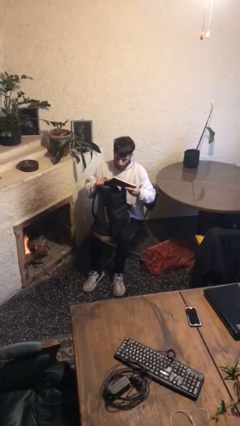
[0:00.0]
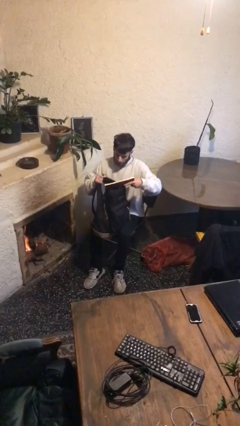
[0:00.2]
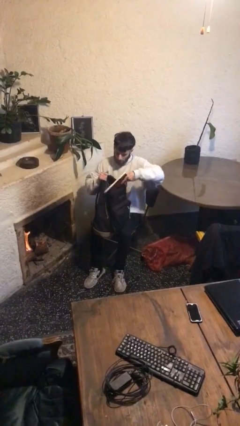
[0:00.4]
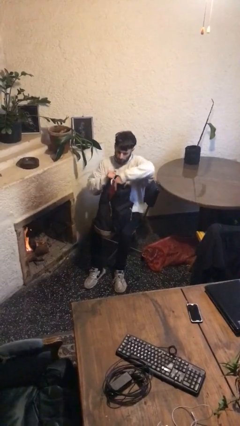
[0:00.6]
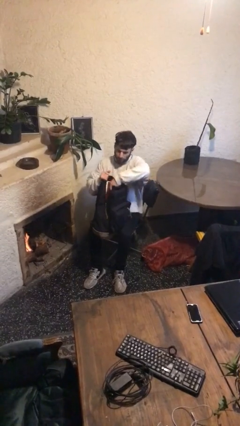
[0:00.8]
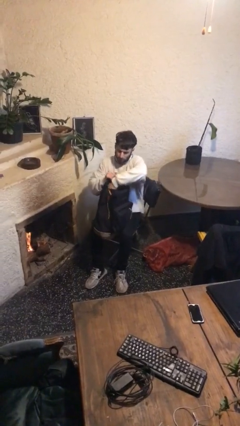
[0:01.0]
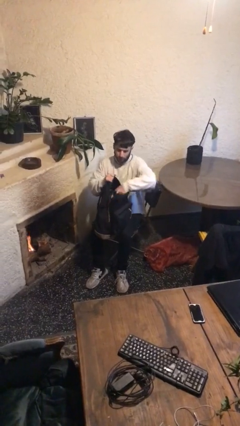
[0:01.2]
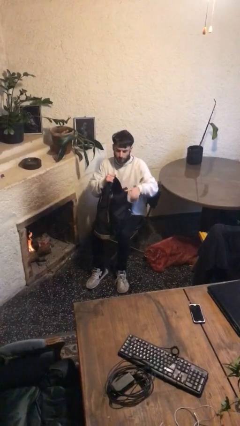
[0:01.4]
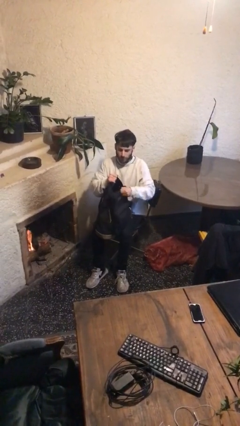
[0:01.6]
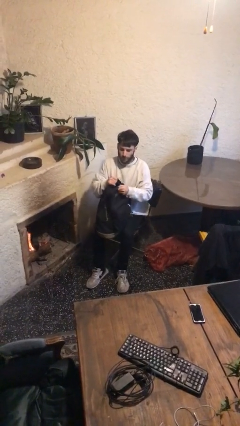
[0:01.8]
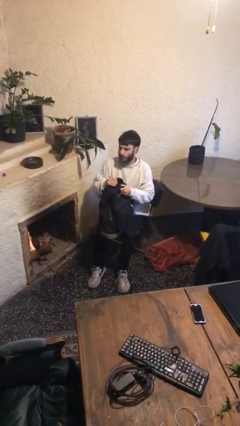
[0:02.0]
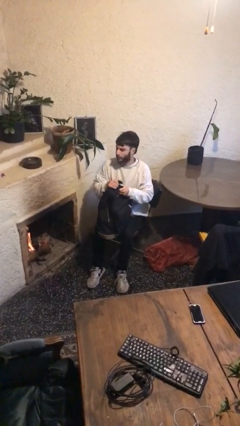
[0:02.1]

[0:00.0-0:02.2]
person puts object into backpack

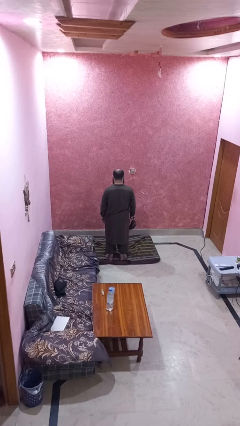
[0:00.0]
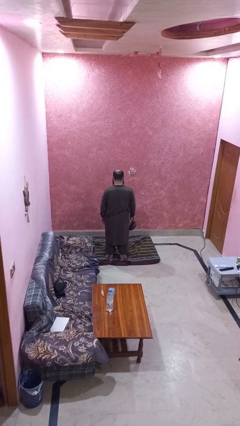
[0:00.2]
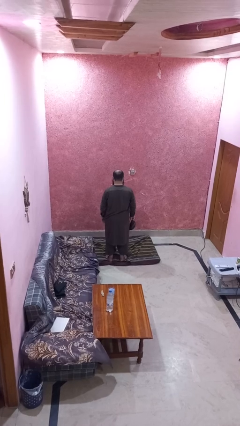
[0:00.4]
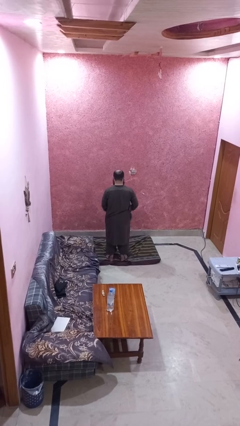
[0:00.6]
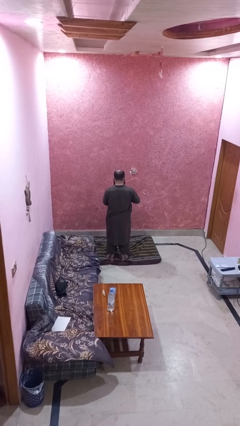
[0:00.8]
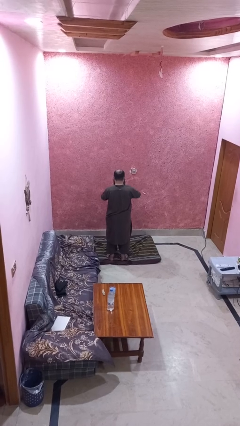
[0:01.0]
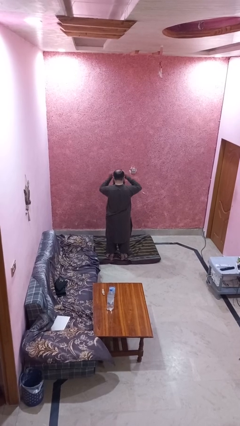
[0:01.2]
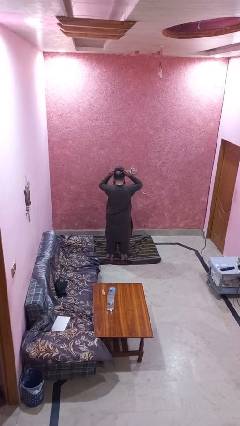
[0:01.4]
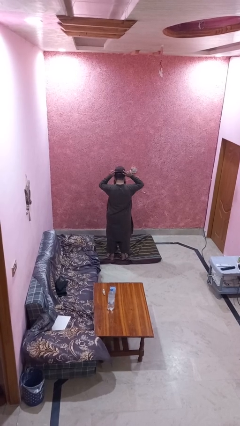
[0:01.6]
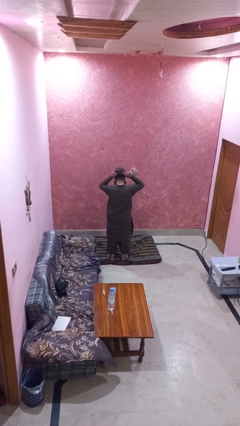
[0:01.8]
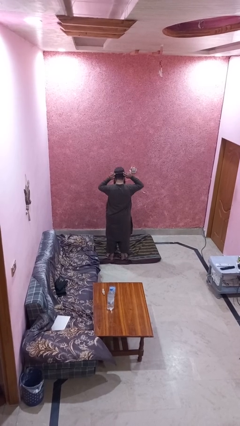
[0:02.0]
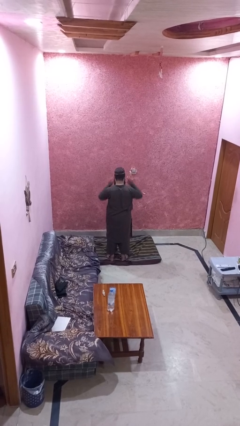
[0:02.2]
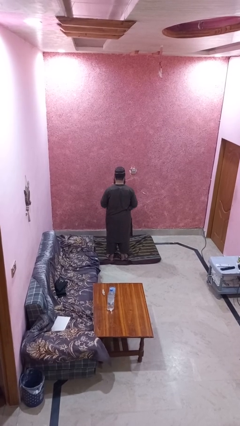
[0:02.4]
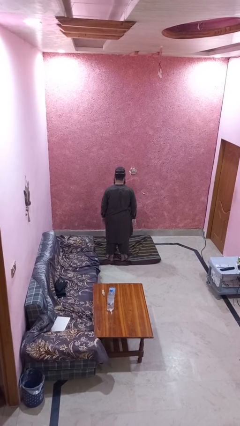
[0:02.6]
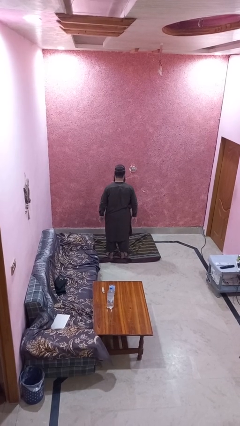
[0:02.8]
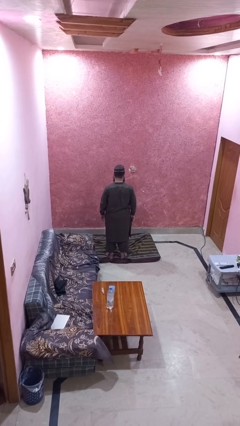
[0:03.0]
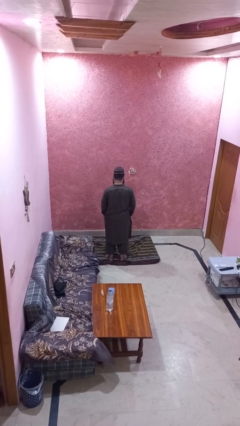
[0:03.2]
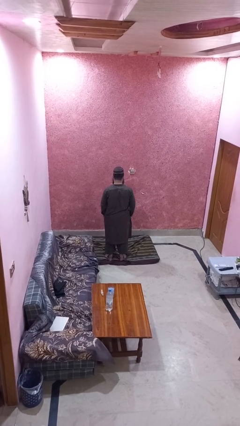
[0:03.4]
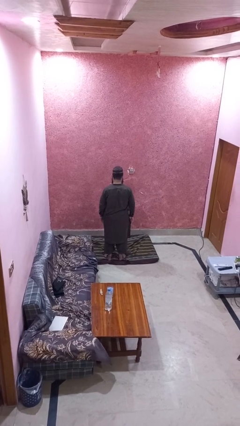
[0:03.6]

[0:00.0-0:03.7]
person puts on hat

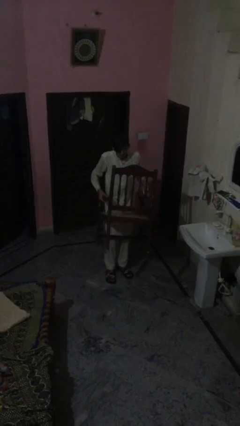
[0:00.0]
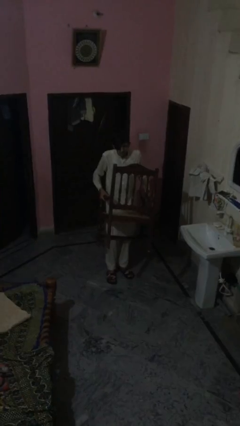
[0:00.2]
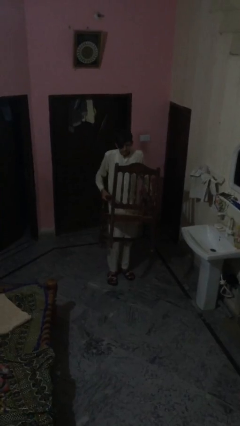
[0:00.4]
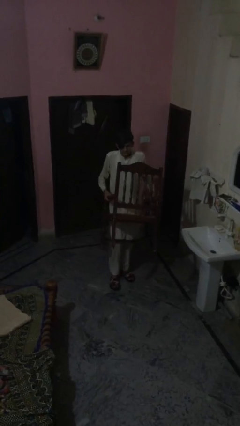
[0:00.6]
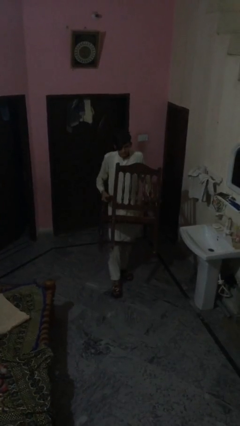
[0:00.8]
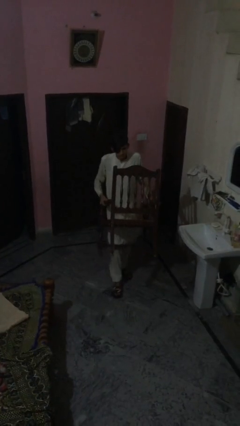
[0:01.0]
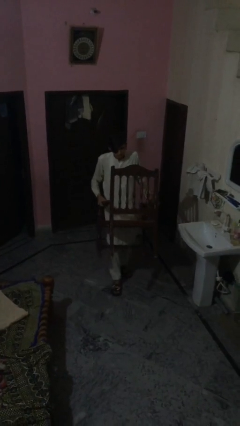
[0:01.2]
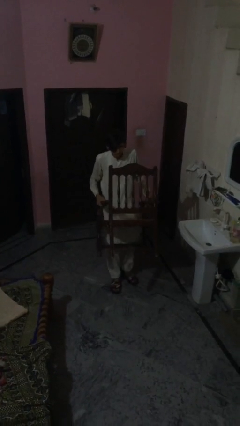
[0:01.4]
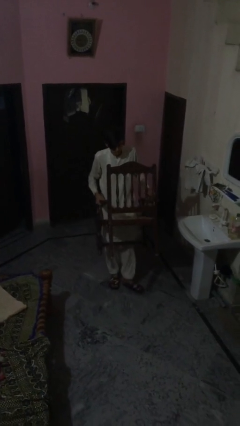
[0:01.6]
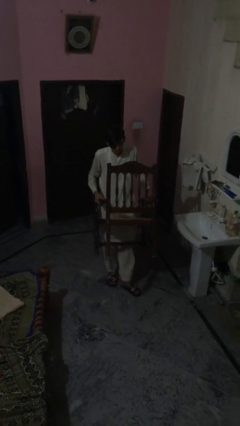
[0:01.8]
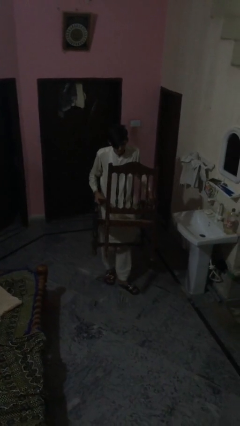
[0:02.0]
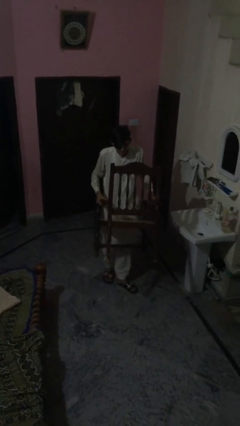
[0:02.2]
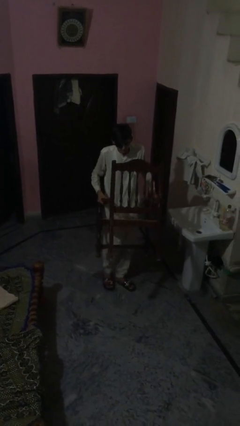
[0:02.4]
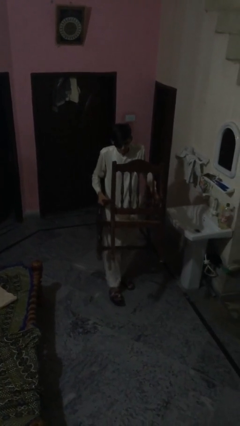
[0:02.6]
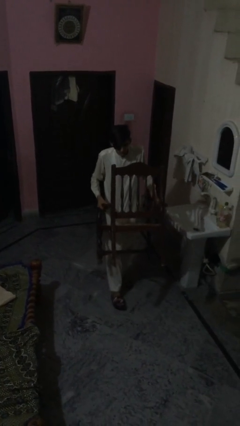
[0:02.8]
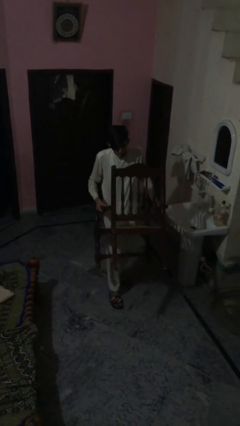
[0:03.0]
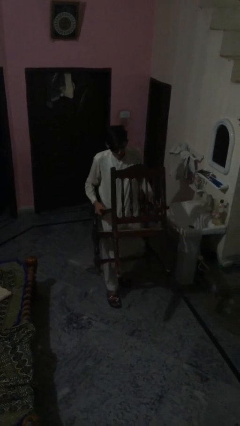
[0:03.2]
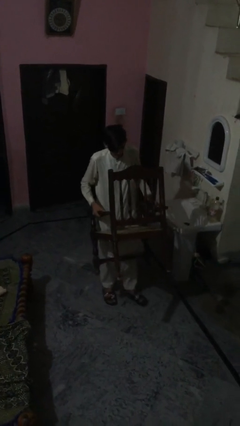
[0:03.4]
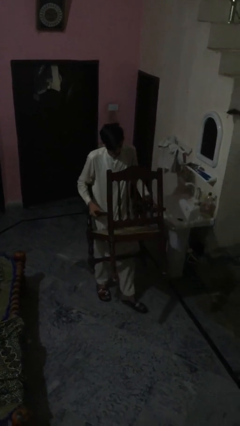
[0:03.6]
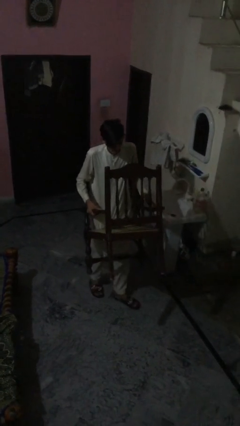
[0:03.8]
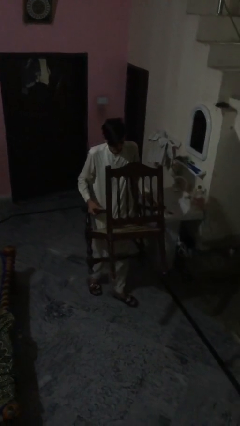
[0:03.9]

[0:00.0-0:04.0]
person carries heavy object

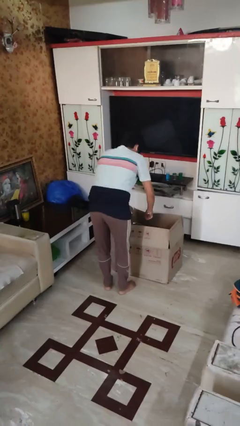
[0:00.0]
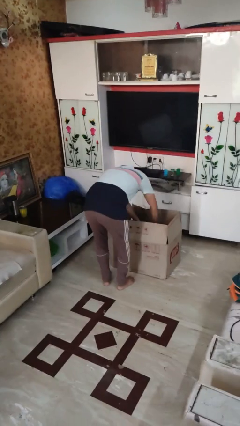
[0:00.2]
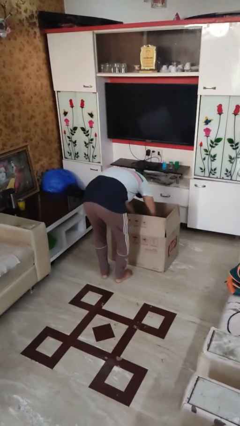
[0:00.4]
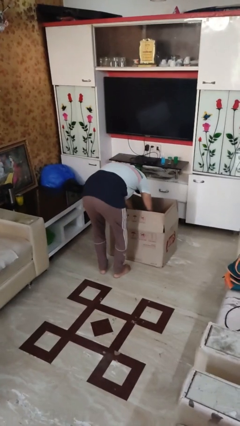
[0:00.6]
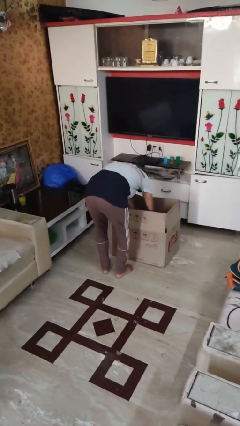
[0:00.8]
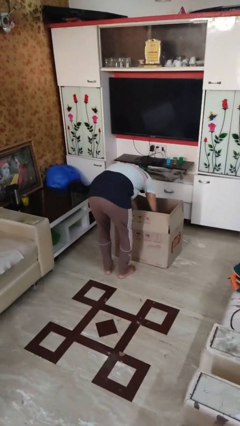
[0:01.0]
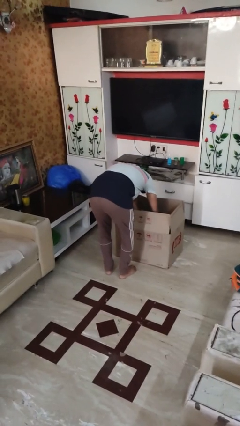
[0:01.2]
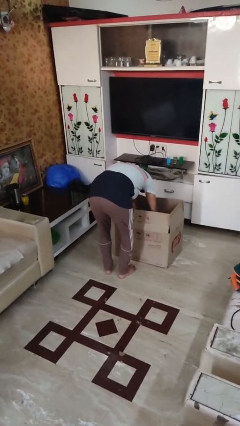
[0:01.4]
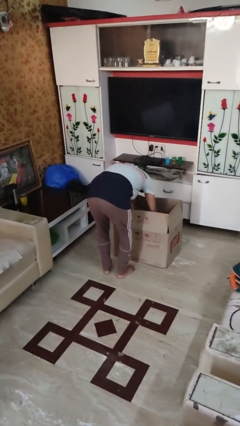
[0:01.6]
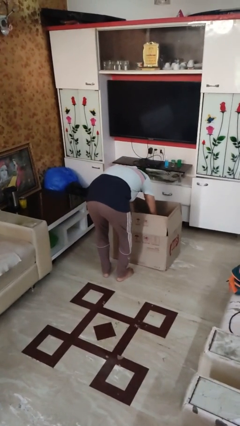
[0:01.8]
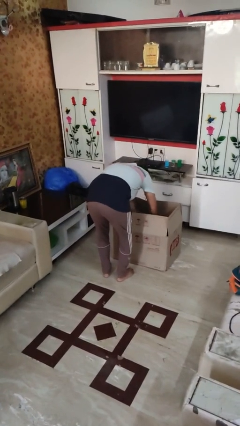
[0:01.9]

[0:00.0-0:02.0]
person searches in box

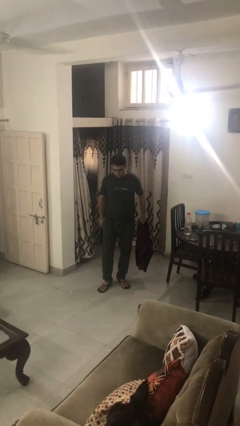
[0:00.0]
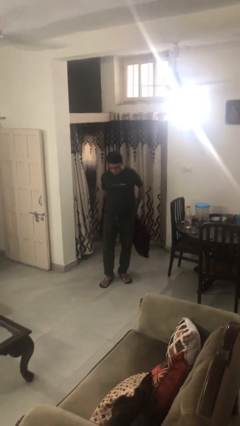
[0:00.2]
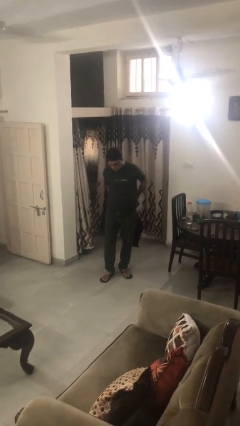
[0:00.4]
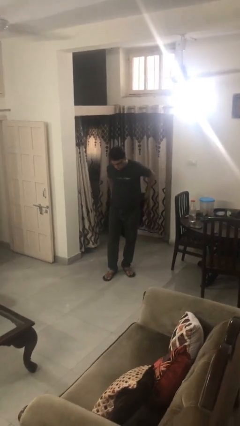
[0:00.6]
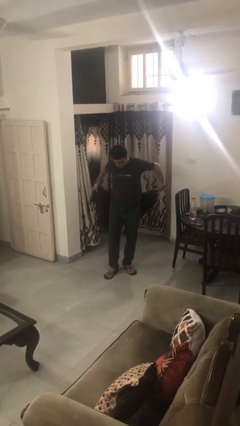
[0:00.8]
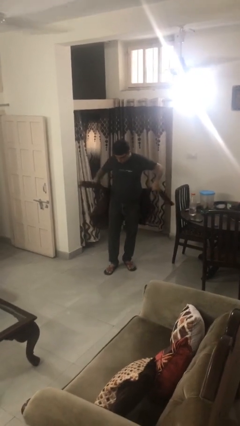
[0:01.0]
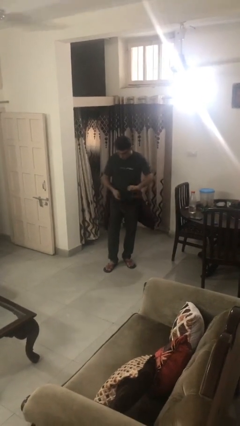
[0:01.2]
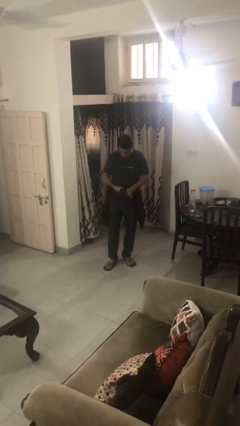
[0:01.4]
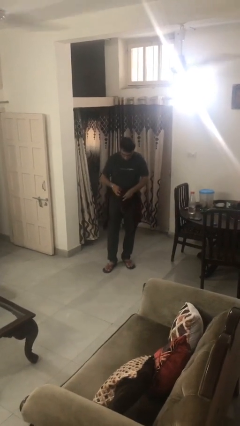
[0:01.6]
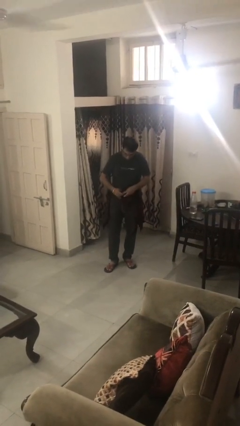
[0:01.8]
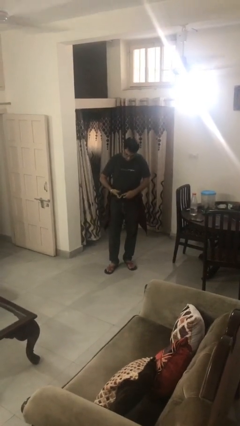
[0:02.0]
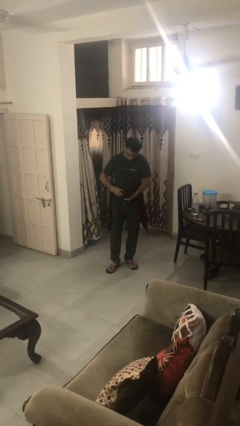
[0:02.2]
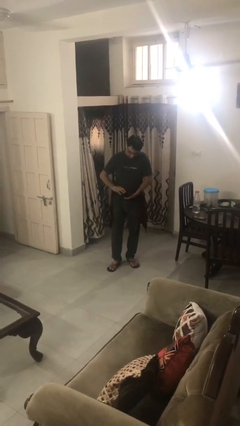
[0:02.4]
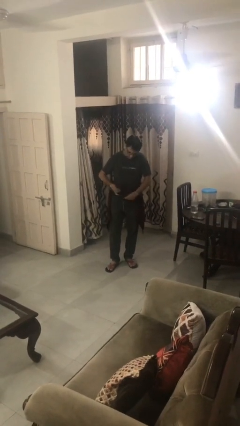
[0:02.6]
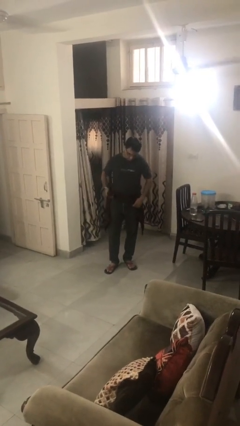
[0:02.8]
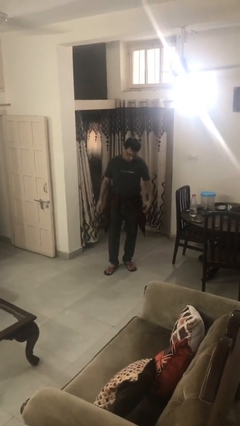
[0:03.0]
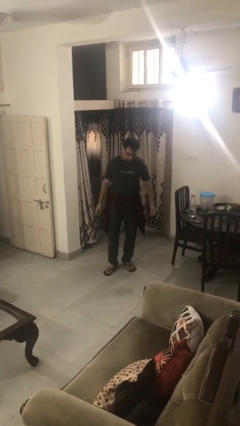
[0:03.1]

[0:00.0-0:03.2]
person ties jacket around waist

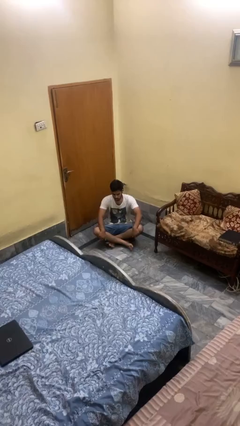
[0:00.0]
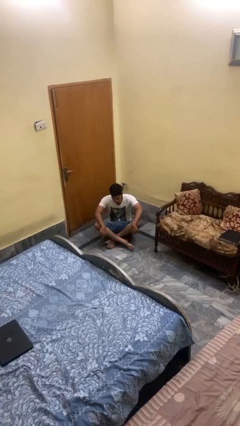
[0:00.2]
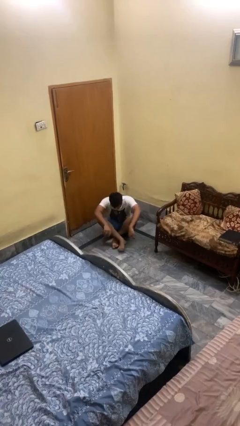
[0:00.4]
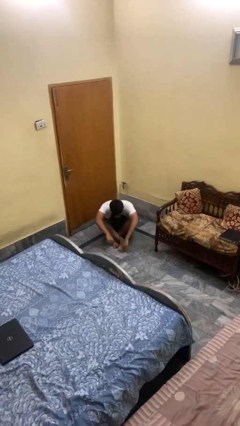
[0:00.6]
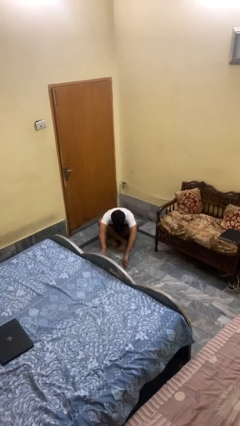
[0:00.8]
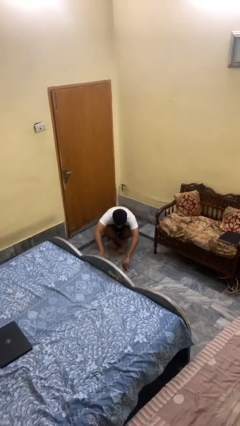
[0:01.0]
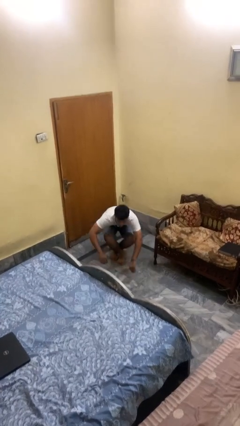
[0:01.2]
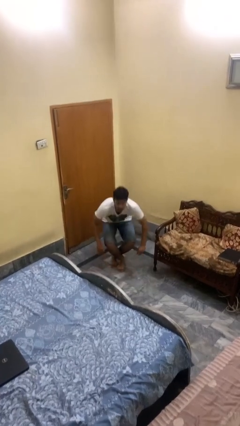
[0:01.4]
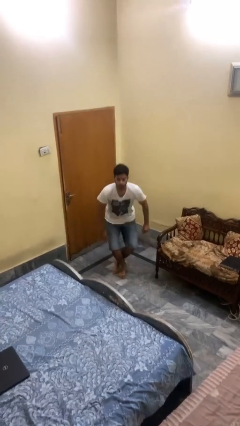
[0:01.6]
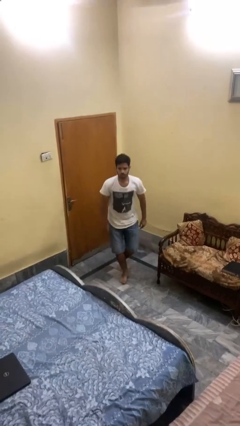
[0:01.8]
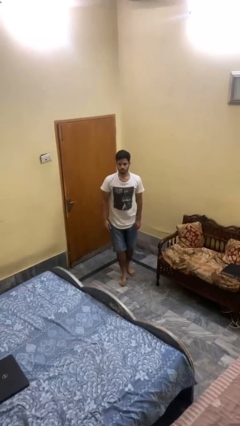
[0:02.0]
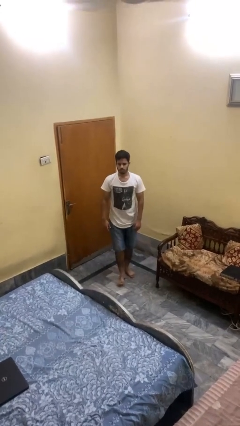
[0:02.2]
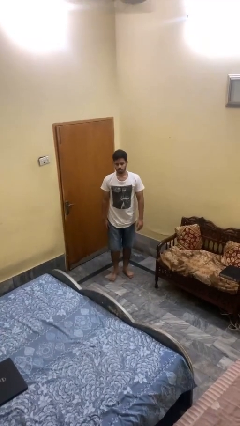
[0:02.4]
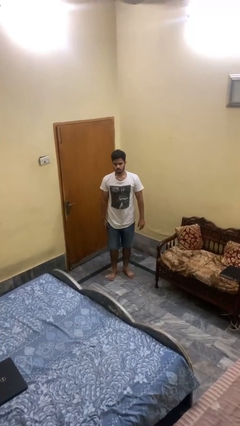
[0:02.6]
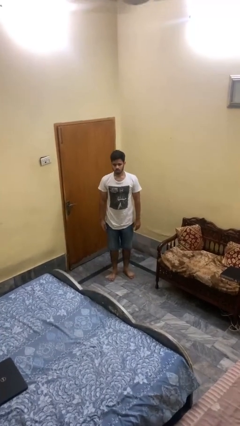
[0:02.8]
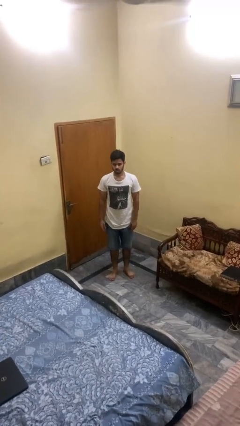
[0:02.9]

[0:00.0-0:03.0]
person stands up from floor
